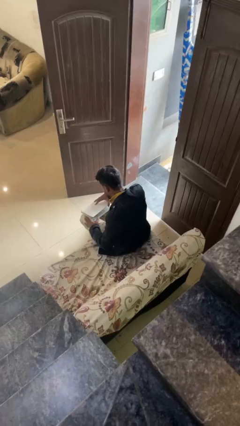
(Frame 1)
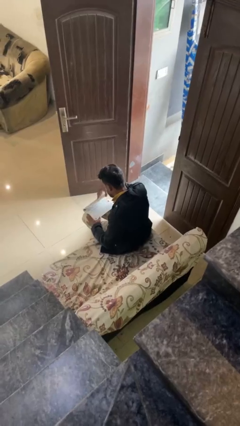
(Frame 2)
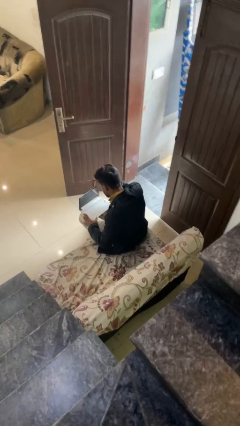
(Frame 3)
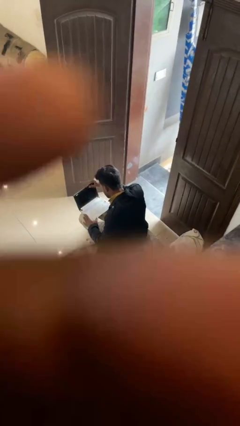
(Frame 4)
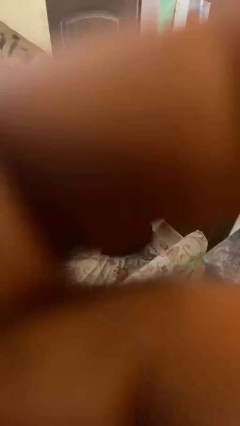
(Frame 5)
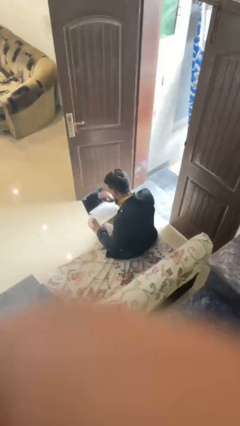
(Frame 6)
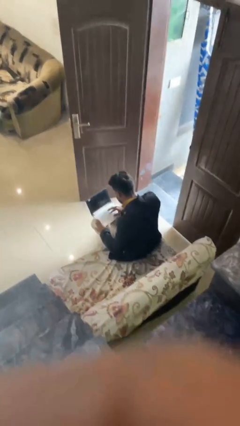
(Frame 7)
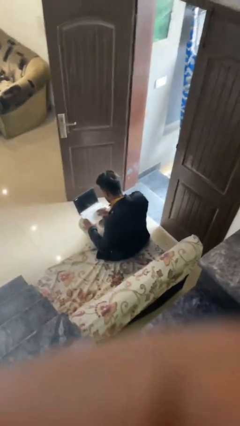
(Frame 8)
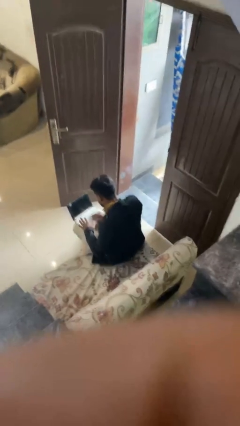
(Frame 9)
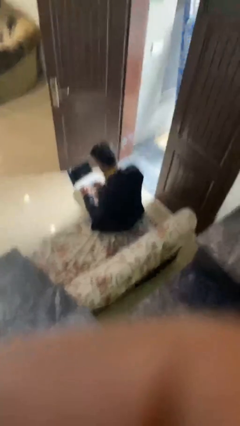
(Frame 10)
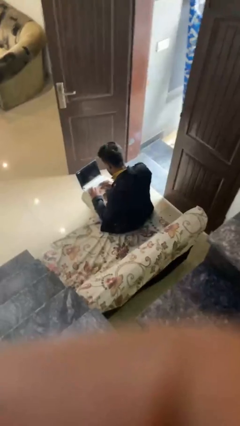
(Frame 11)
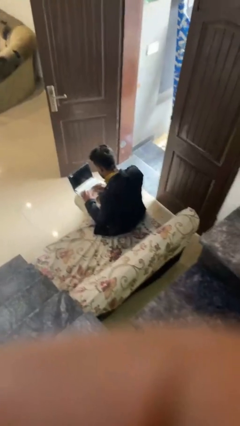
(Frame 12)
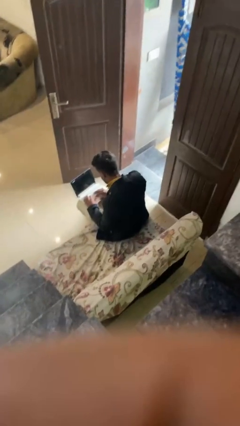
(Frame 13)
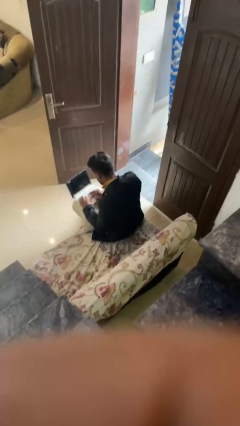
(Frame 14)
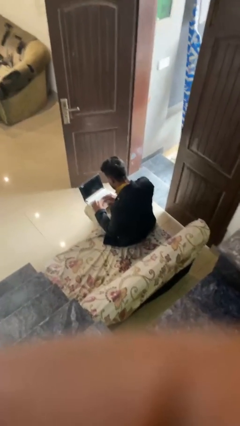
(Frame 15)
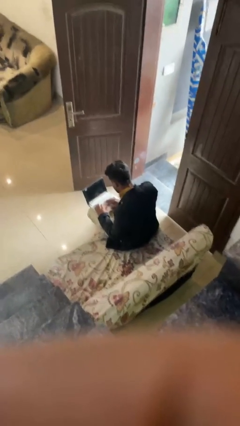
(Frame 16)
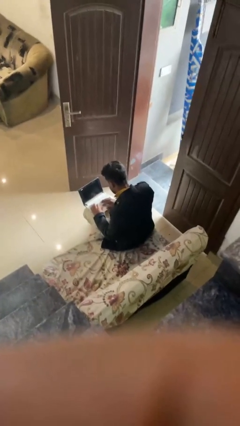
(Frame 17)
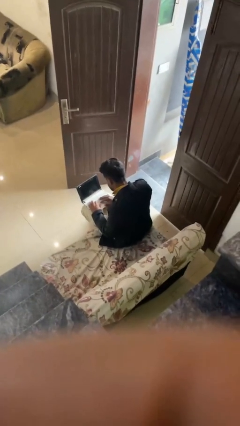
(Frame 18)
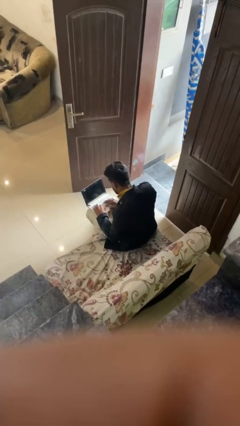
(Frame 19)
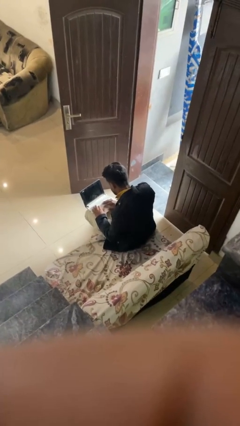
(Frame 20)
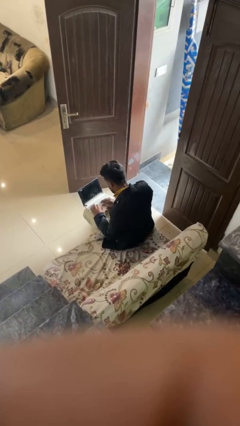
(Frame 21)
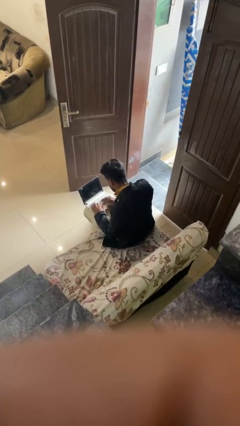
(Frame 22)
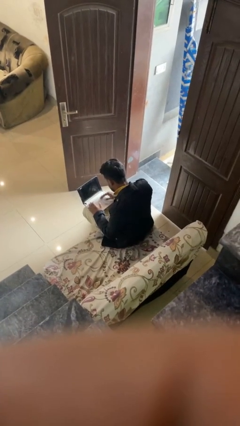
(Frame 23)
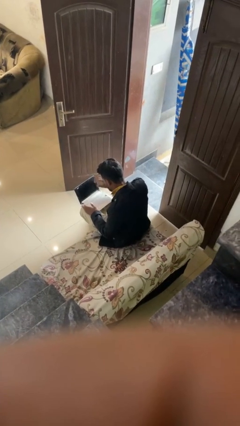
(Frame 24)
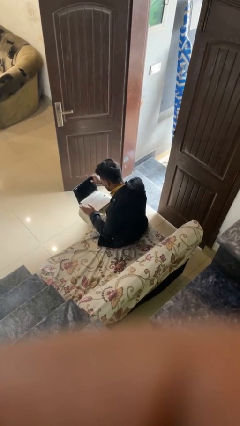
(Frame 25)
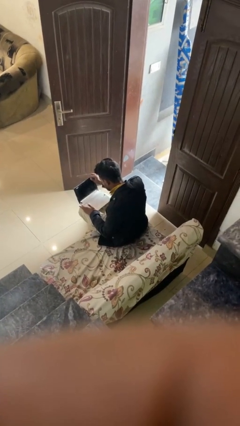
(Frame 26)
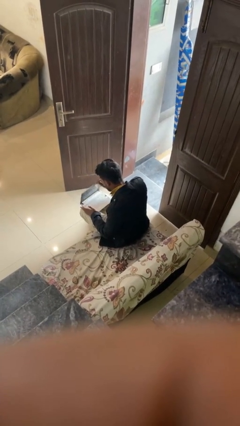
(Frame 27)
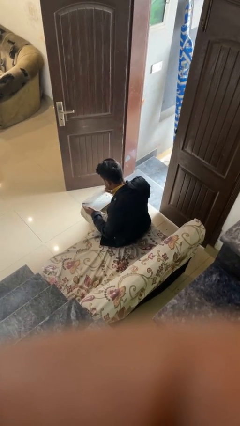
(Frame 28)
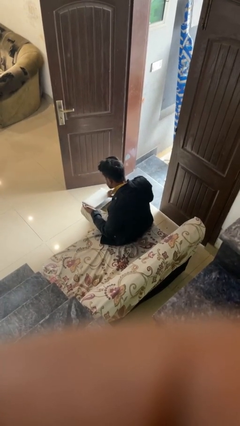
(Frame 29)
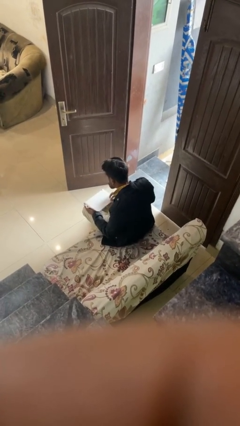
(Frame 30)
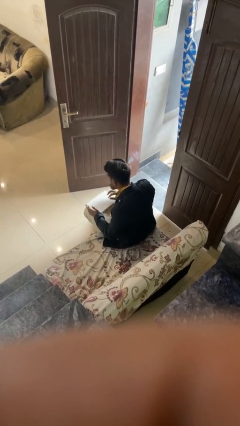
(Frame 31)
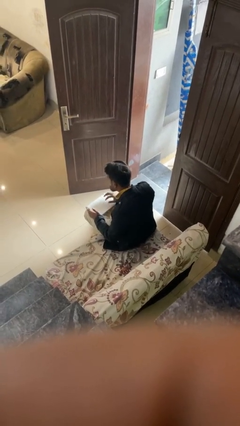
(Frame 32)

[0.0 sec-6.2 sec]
person interacts with laptop

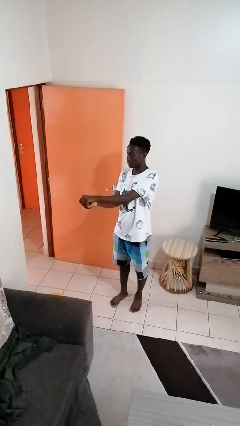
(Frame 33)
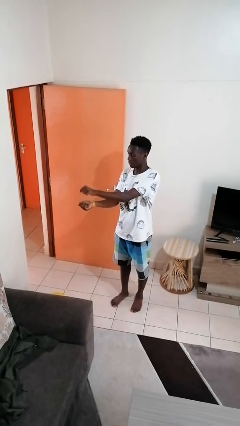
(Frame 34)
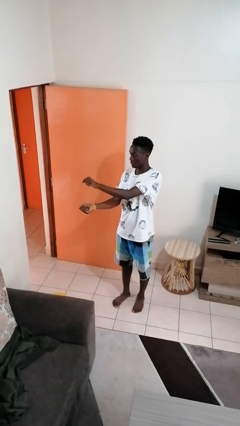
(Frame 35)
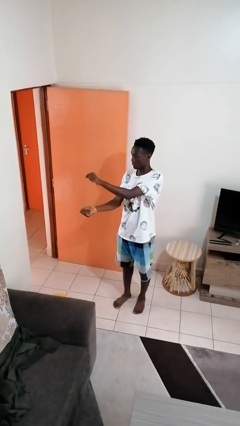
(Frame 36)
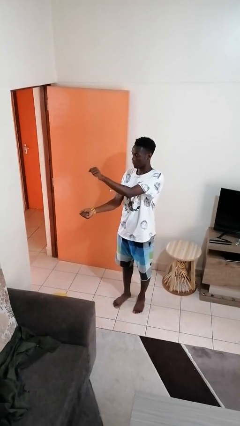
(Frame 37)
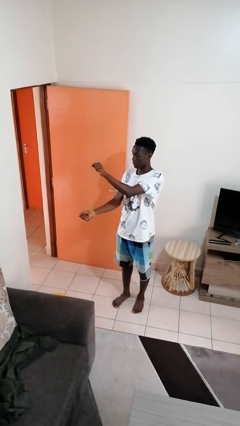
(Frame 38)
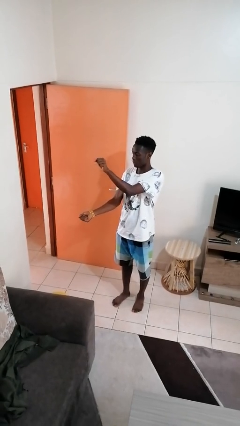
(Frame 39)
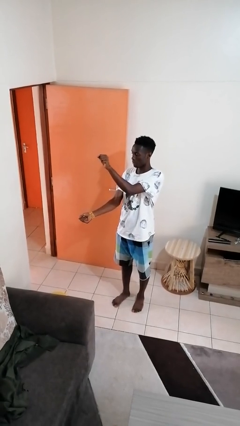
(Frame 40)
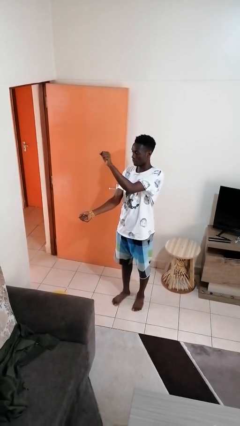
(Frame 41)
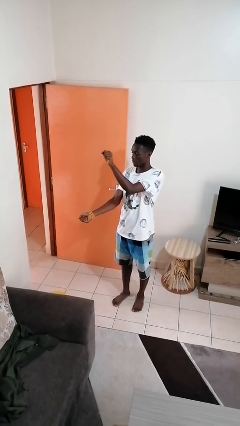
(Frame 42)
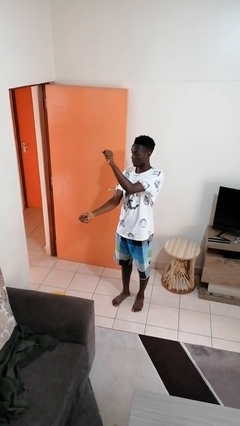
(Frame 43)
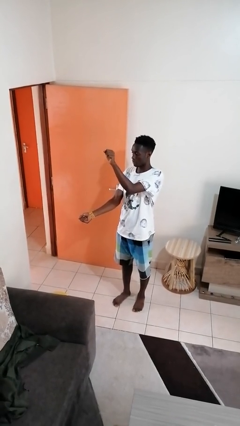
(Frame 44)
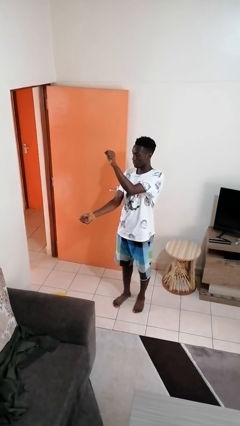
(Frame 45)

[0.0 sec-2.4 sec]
person gestures zoom in

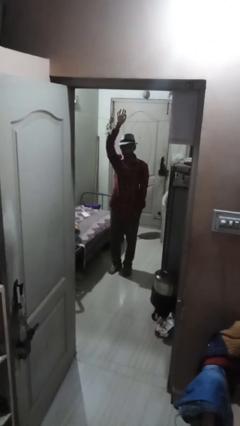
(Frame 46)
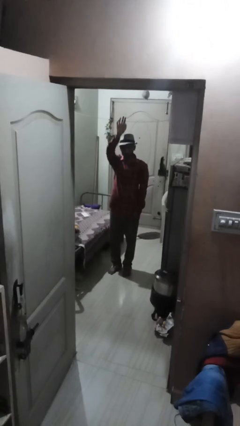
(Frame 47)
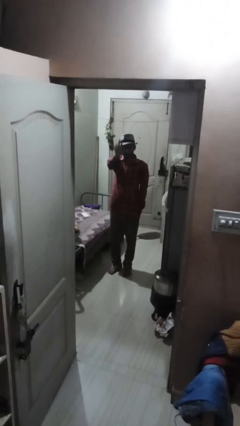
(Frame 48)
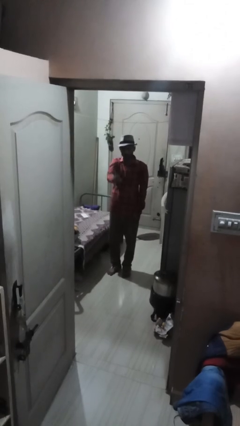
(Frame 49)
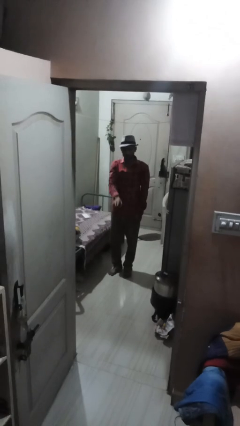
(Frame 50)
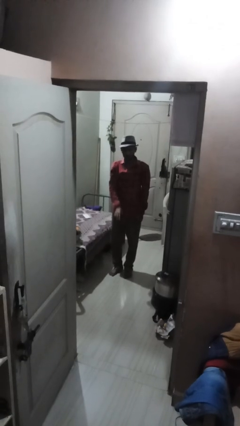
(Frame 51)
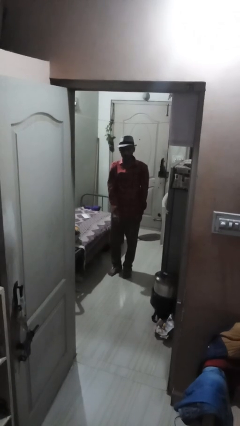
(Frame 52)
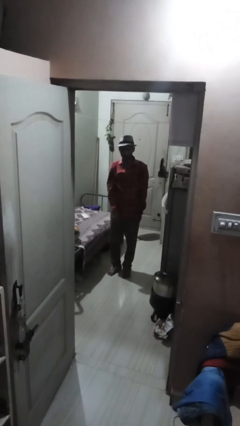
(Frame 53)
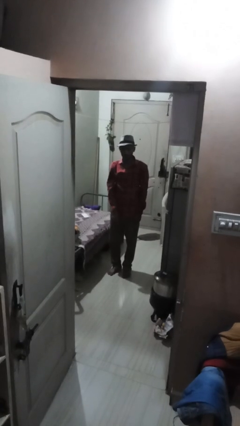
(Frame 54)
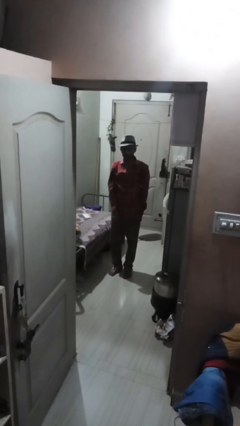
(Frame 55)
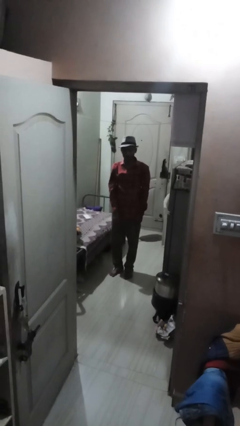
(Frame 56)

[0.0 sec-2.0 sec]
person gestures swipe down

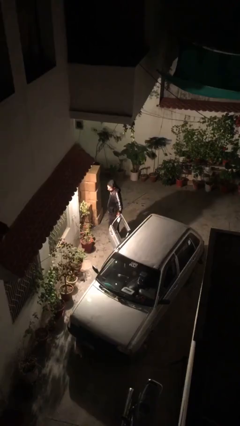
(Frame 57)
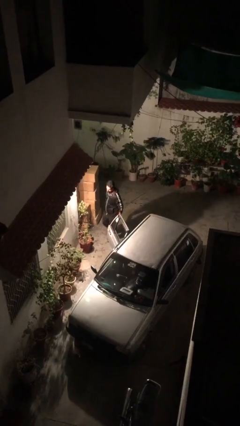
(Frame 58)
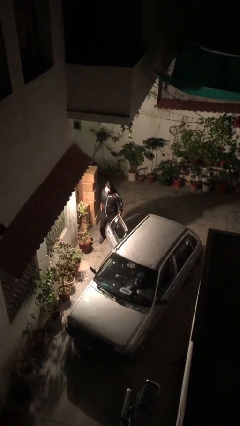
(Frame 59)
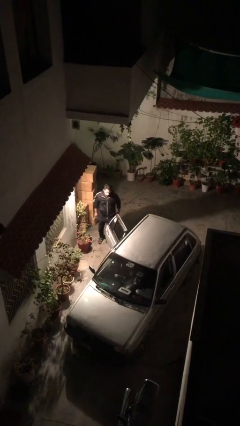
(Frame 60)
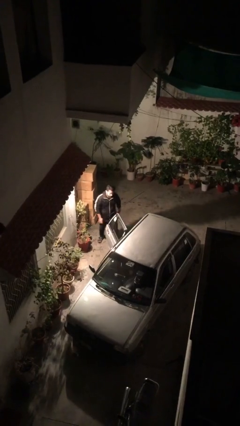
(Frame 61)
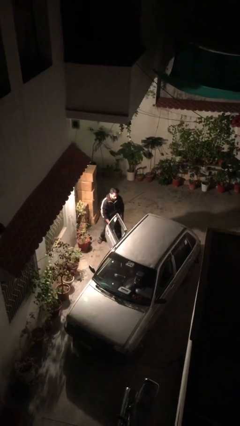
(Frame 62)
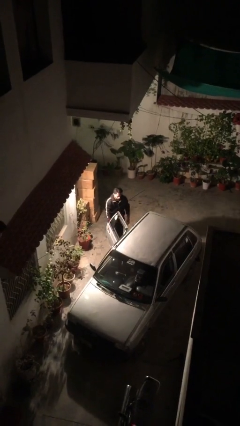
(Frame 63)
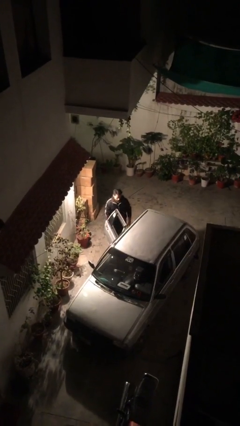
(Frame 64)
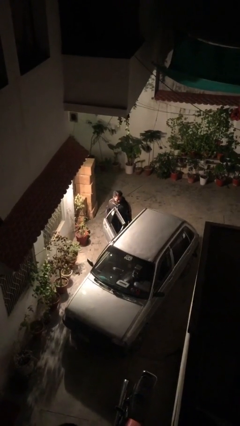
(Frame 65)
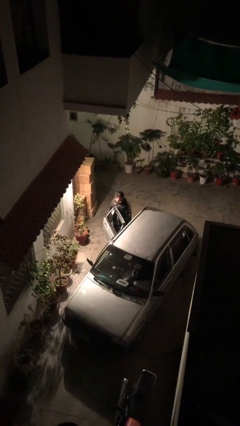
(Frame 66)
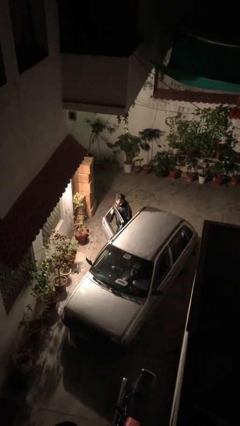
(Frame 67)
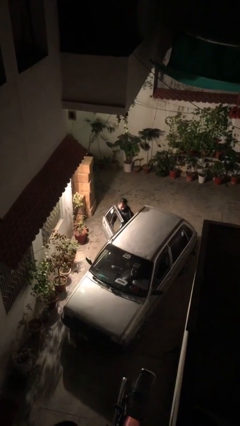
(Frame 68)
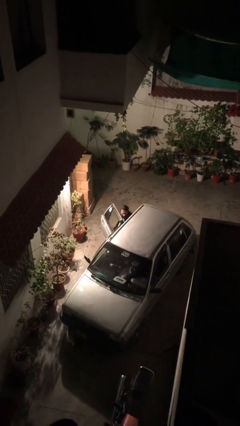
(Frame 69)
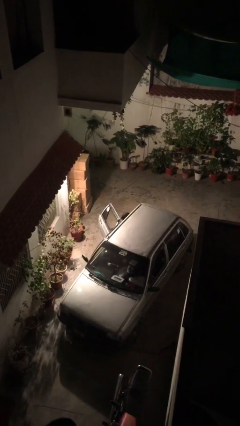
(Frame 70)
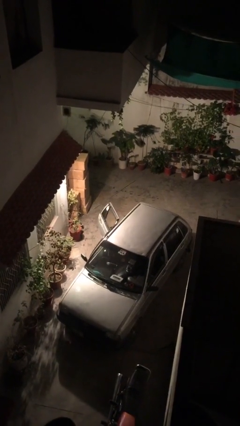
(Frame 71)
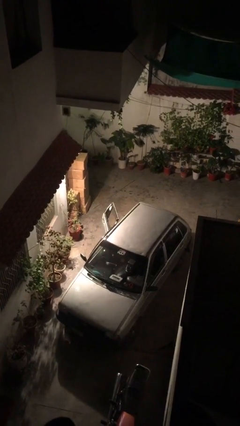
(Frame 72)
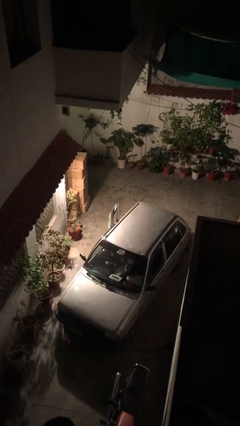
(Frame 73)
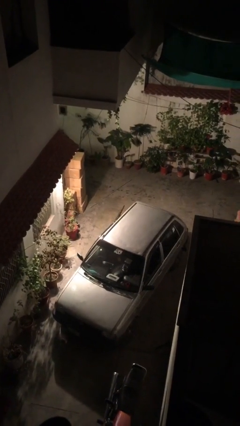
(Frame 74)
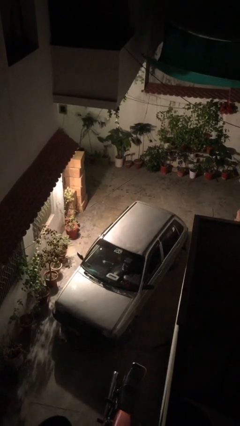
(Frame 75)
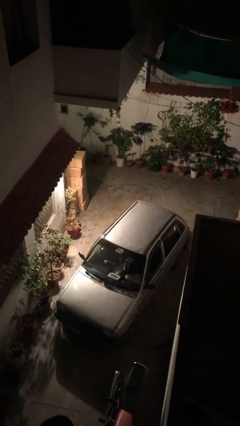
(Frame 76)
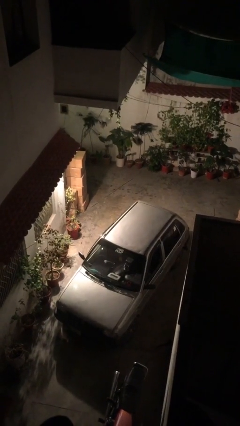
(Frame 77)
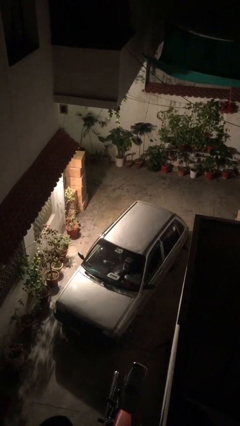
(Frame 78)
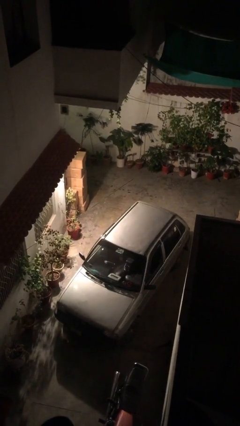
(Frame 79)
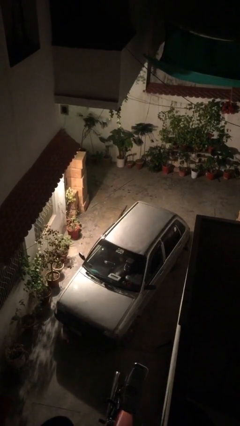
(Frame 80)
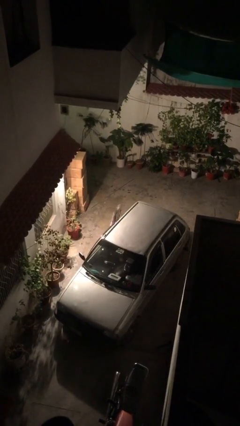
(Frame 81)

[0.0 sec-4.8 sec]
person enters car

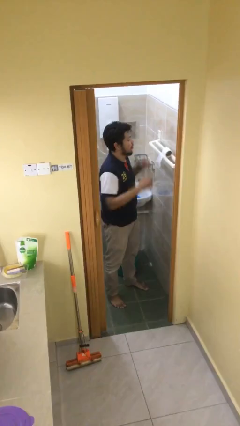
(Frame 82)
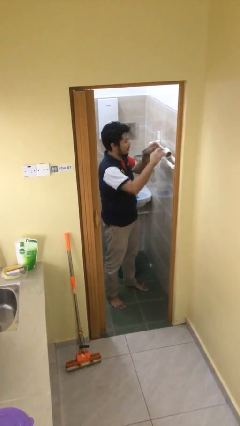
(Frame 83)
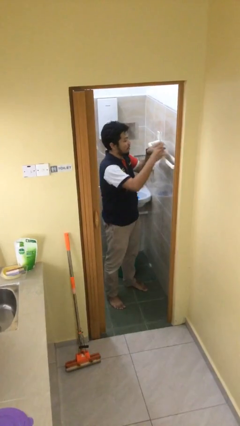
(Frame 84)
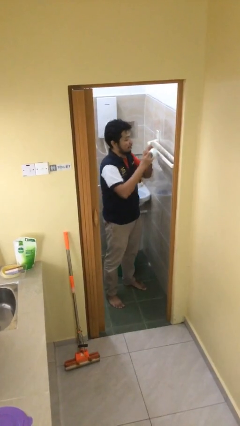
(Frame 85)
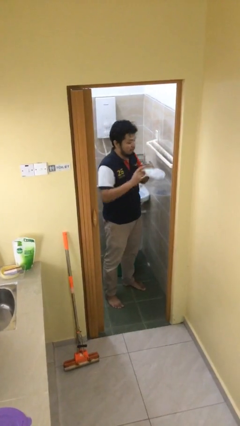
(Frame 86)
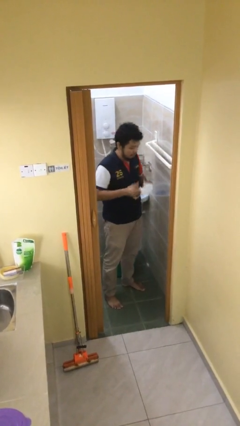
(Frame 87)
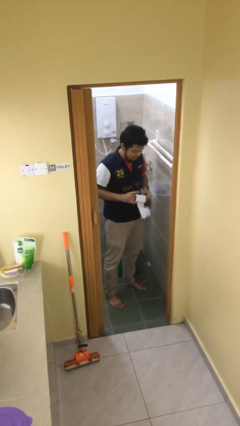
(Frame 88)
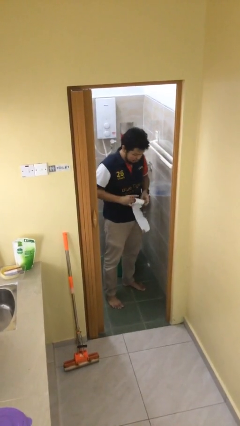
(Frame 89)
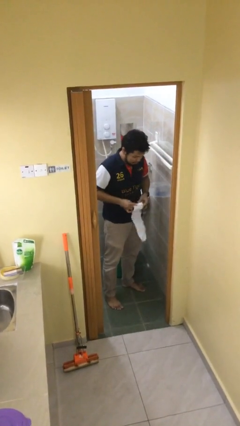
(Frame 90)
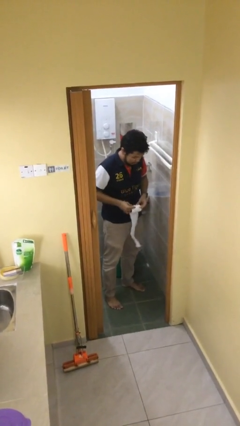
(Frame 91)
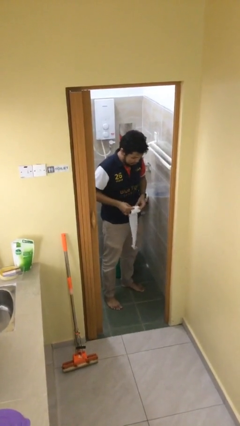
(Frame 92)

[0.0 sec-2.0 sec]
person picks up object from countertop
